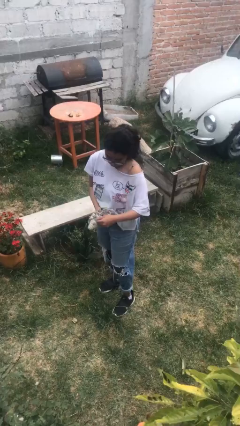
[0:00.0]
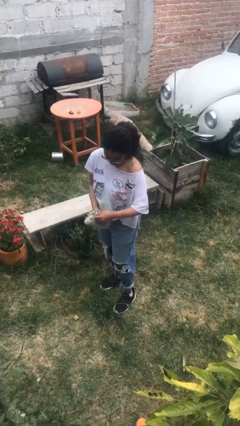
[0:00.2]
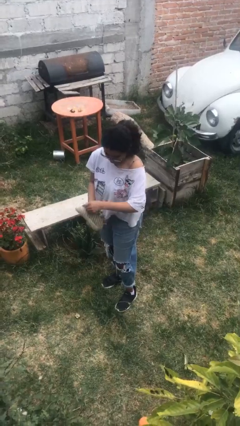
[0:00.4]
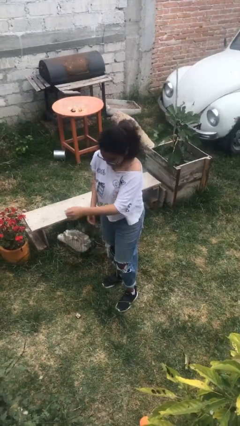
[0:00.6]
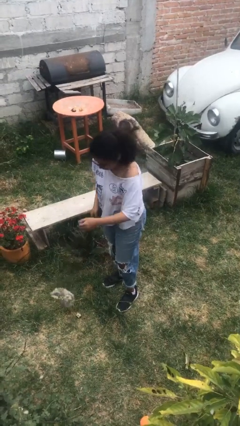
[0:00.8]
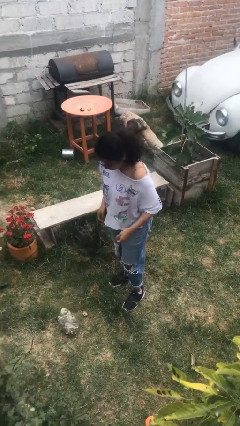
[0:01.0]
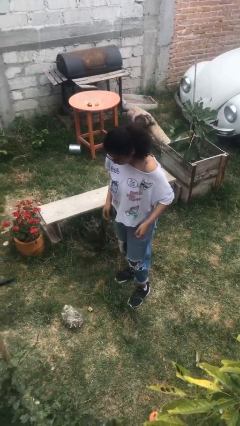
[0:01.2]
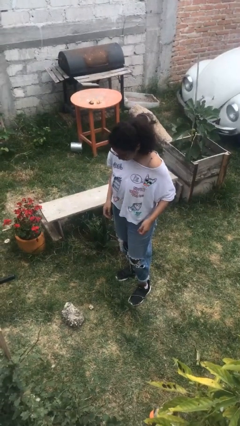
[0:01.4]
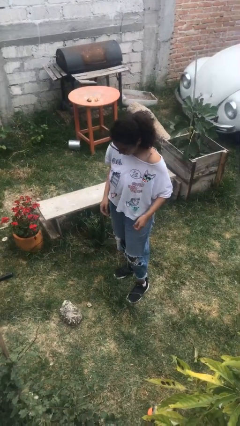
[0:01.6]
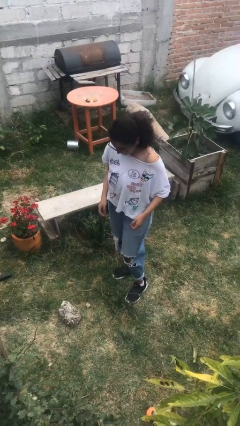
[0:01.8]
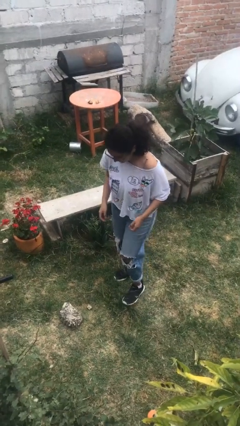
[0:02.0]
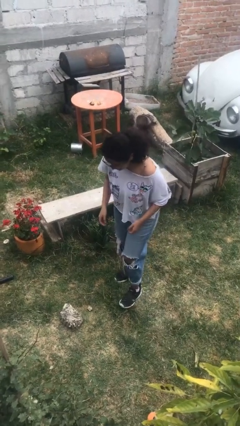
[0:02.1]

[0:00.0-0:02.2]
person drops object

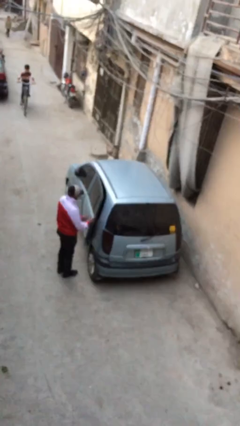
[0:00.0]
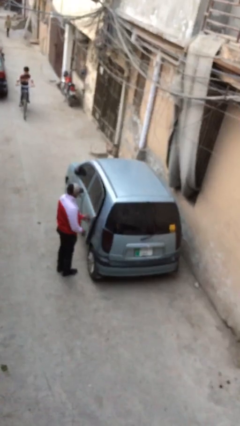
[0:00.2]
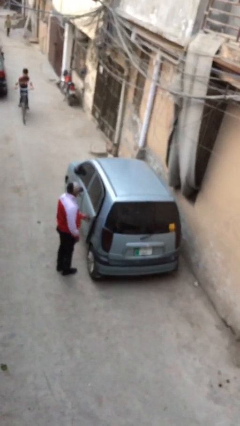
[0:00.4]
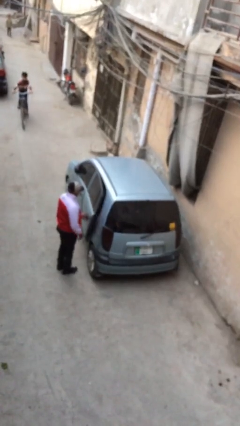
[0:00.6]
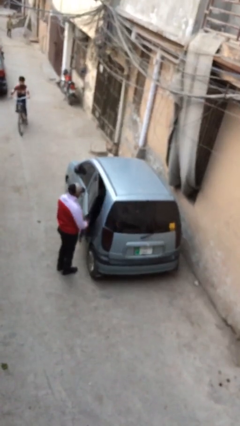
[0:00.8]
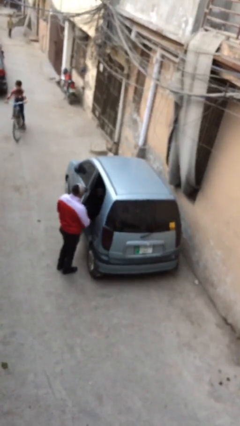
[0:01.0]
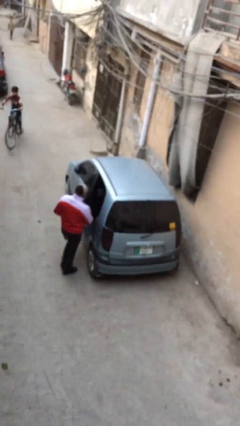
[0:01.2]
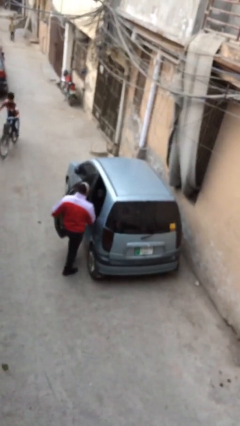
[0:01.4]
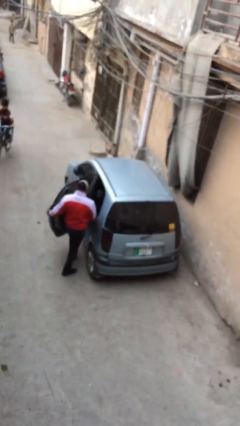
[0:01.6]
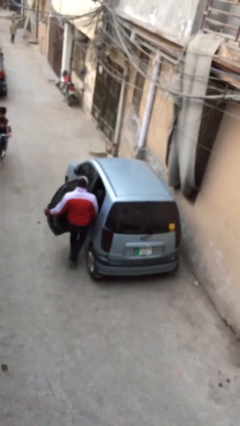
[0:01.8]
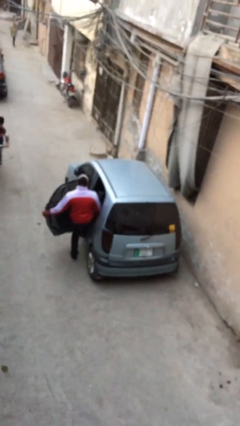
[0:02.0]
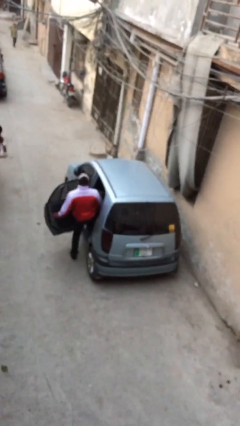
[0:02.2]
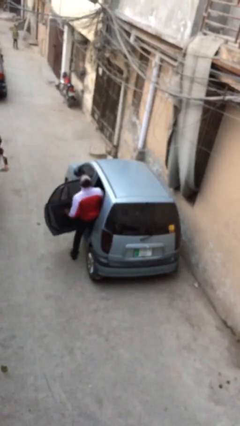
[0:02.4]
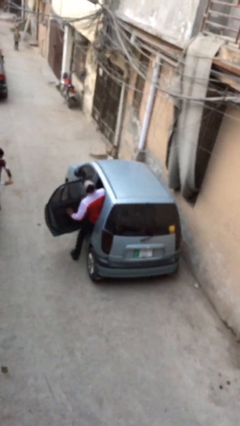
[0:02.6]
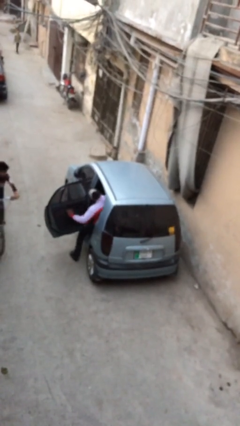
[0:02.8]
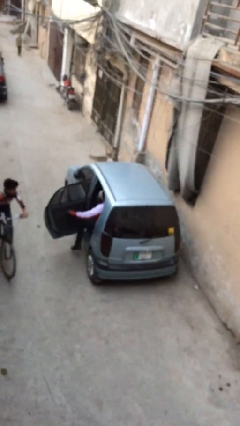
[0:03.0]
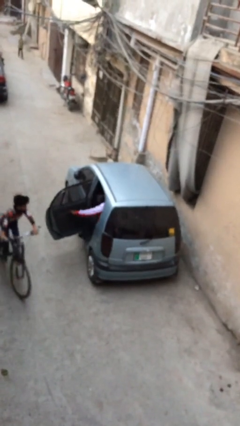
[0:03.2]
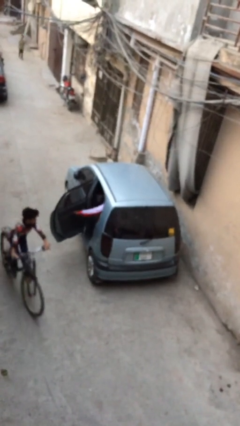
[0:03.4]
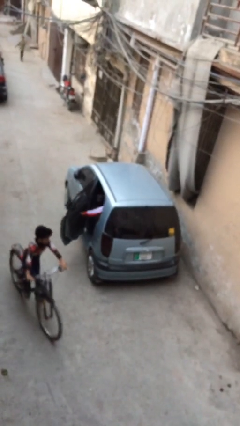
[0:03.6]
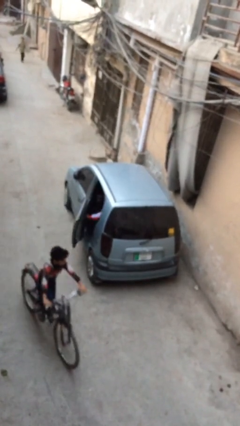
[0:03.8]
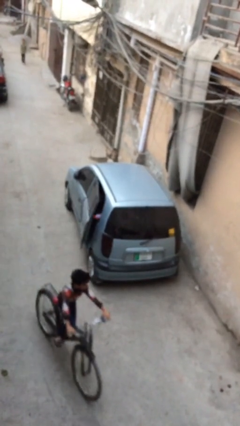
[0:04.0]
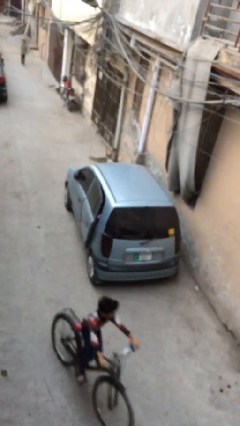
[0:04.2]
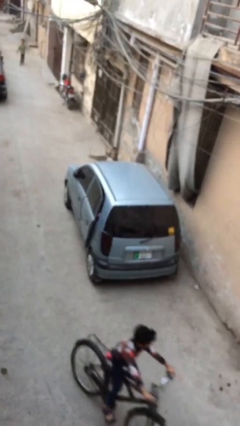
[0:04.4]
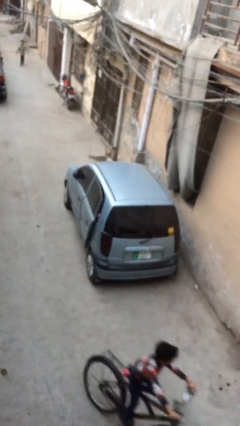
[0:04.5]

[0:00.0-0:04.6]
car picks up person

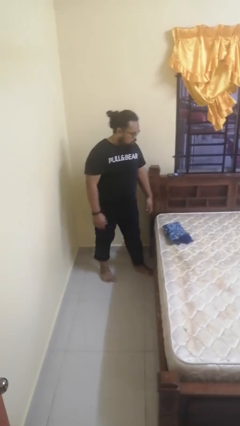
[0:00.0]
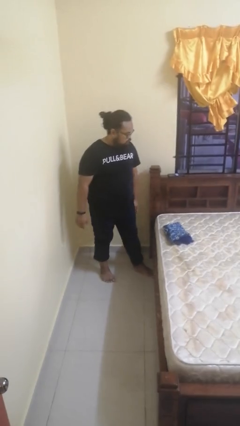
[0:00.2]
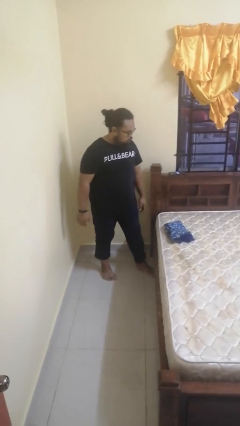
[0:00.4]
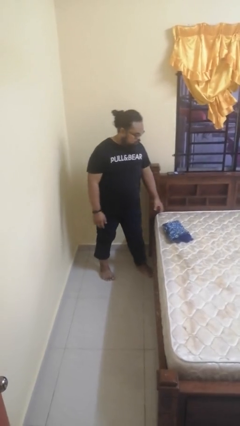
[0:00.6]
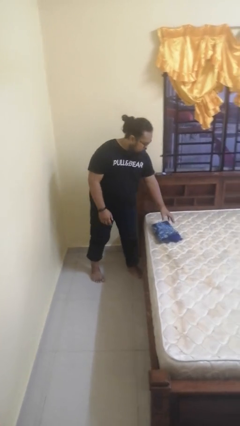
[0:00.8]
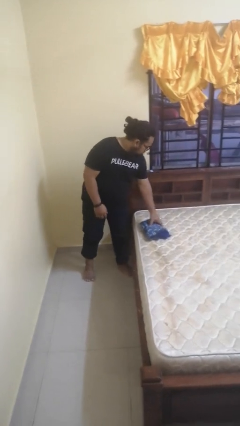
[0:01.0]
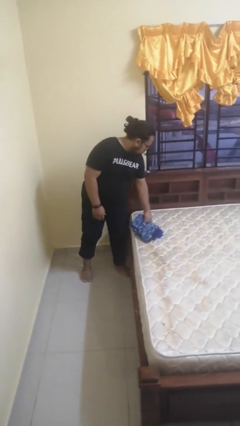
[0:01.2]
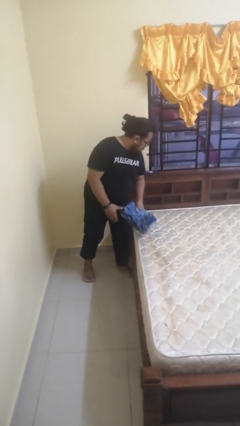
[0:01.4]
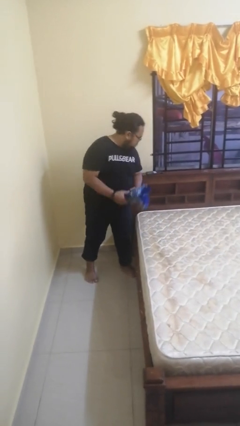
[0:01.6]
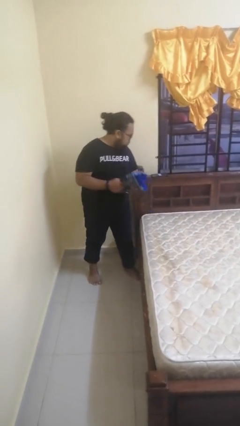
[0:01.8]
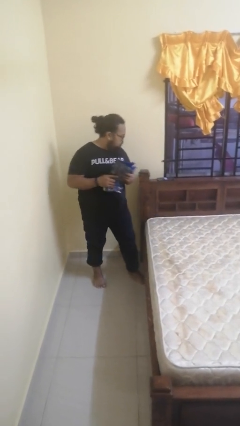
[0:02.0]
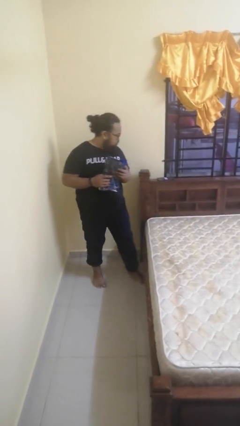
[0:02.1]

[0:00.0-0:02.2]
person picks up object from bed

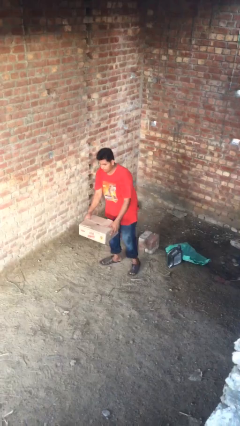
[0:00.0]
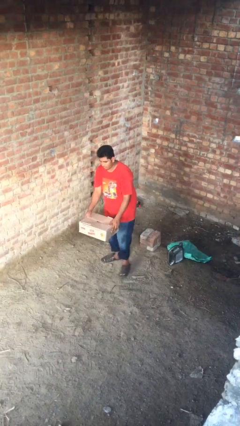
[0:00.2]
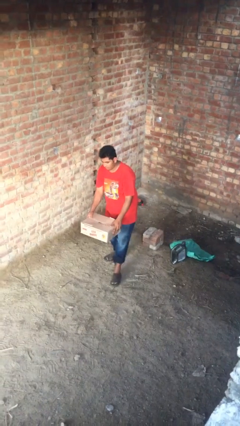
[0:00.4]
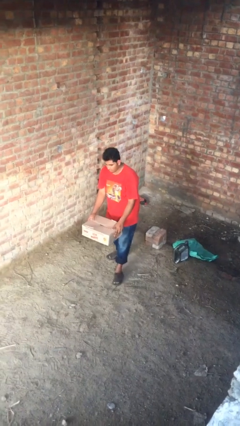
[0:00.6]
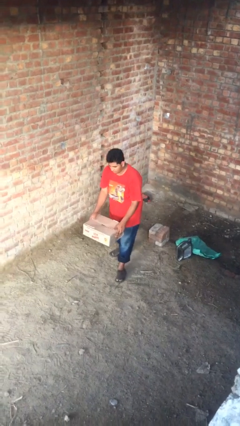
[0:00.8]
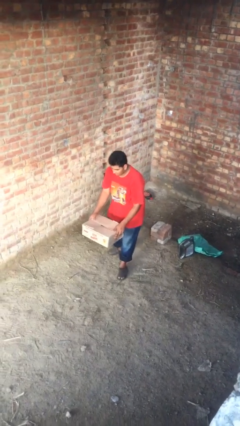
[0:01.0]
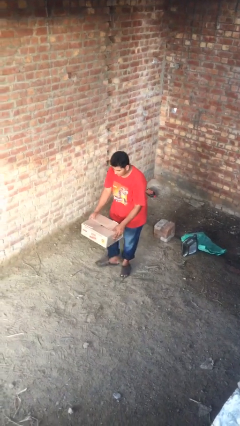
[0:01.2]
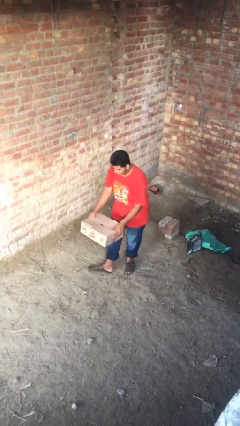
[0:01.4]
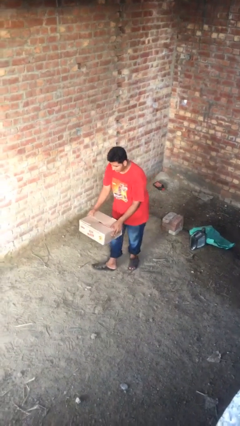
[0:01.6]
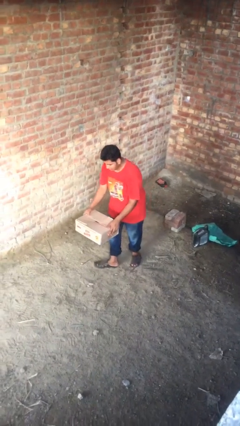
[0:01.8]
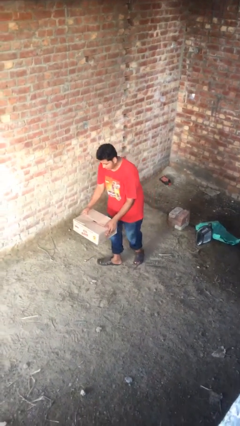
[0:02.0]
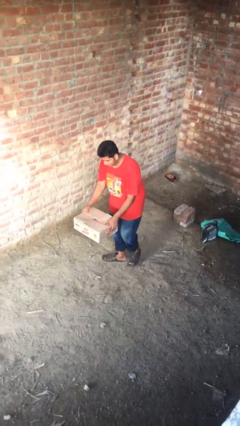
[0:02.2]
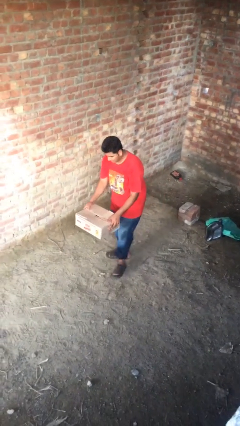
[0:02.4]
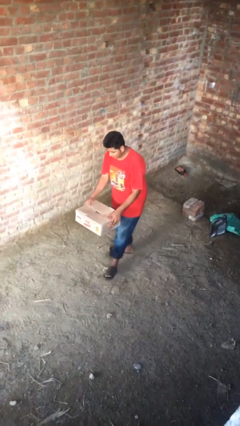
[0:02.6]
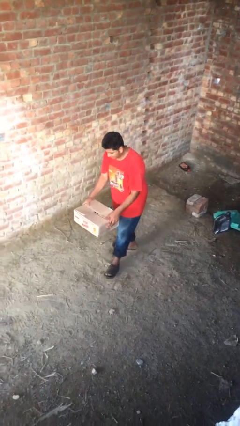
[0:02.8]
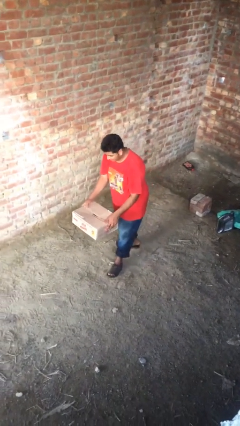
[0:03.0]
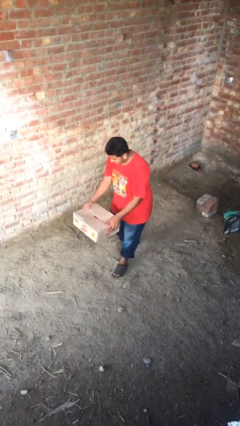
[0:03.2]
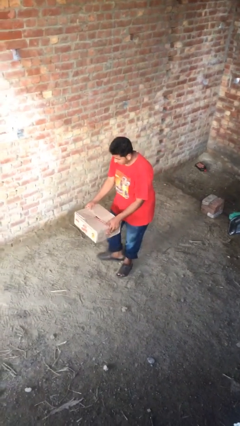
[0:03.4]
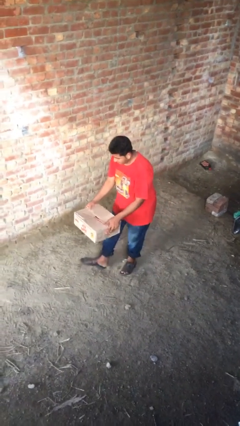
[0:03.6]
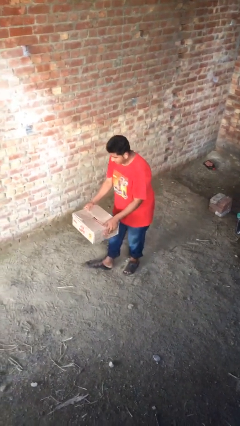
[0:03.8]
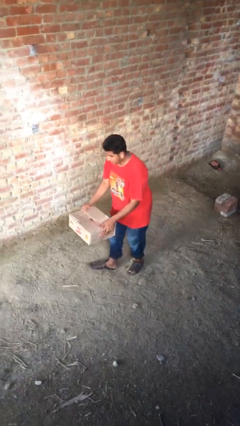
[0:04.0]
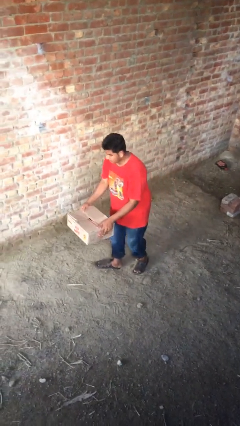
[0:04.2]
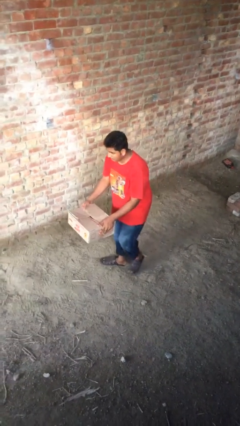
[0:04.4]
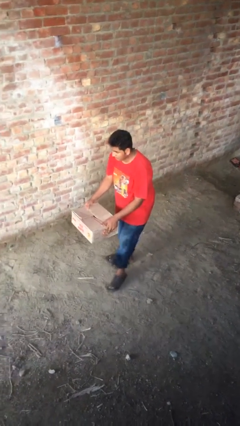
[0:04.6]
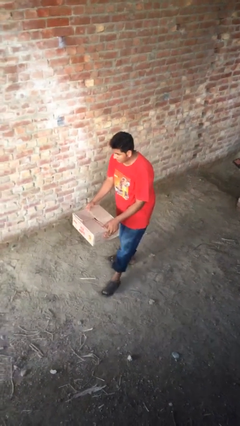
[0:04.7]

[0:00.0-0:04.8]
person carries heavy object

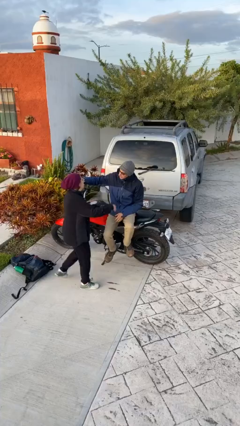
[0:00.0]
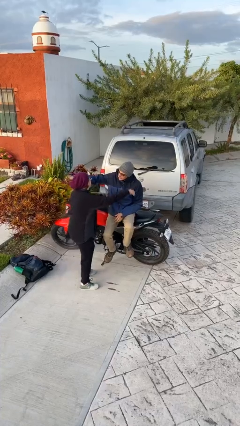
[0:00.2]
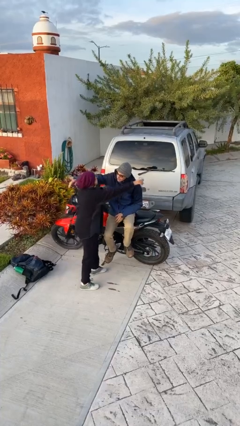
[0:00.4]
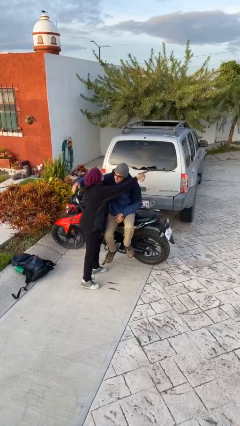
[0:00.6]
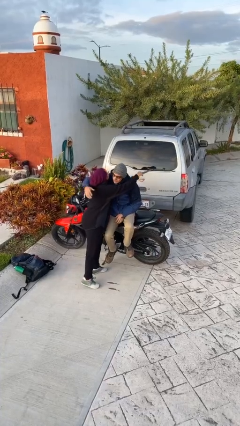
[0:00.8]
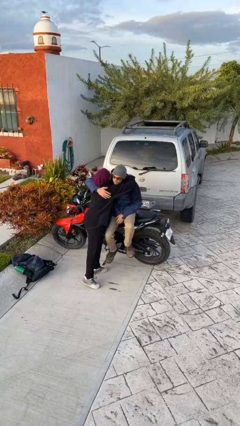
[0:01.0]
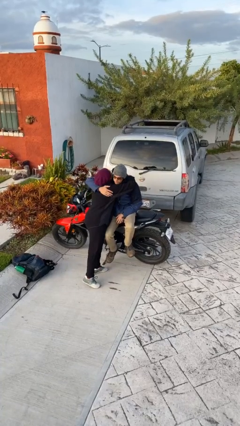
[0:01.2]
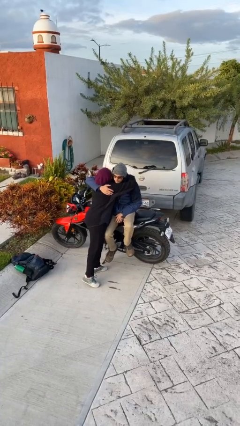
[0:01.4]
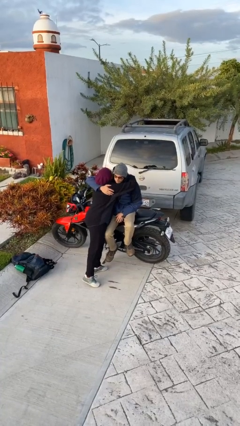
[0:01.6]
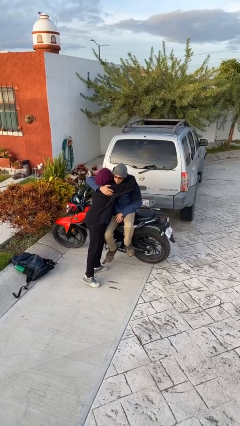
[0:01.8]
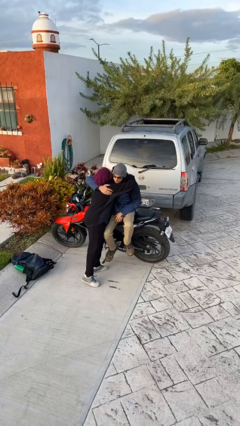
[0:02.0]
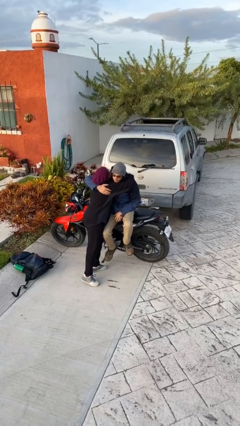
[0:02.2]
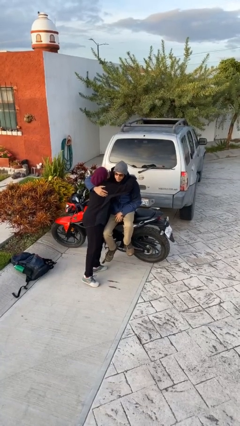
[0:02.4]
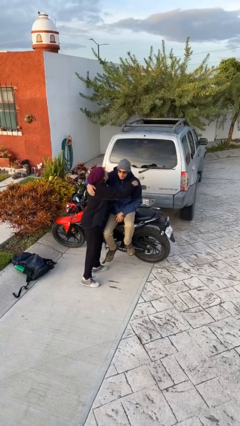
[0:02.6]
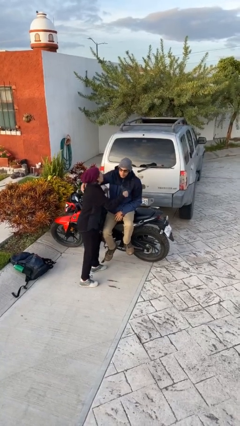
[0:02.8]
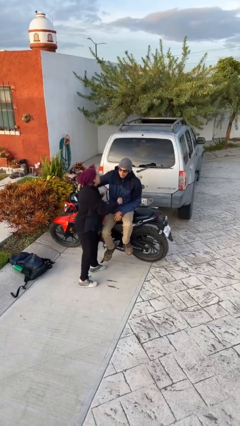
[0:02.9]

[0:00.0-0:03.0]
person embraces person

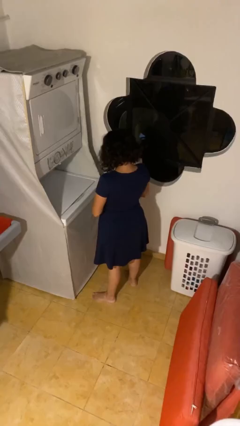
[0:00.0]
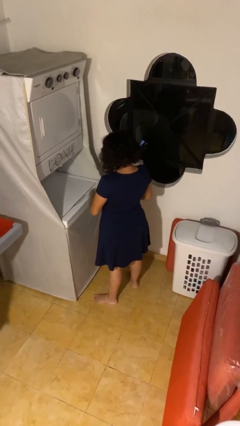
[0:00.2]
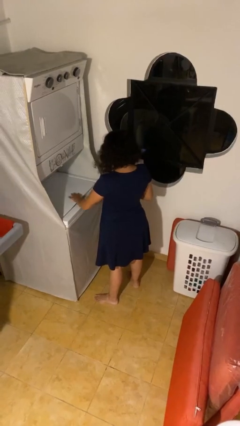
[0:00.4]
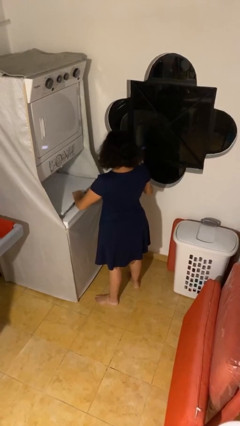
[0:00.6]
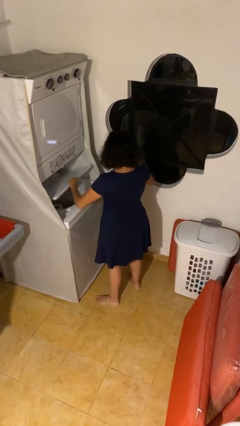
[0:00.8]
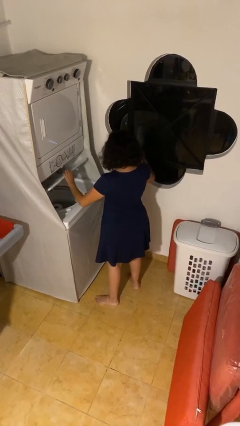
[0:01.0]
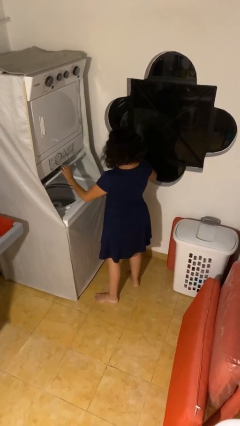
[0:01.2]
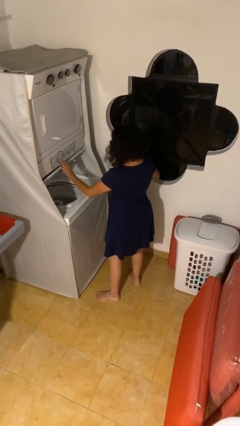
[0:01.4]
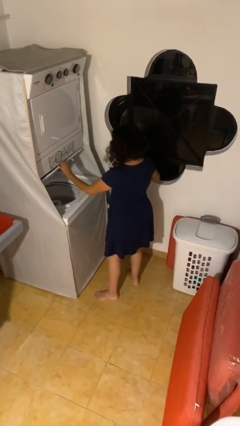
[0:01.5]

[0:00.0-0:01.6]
person opens clothes washer
